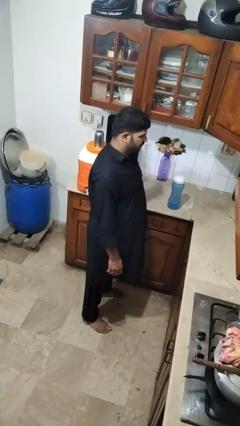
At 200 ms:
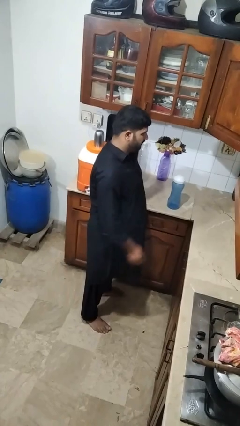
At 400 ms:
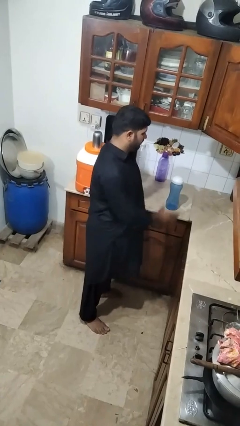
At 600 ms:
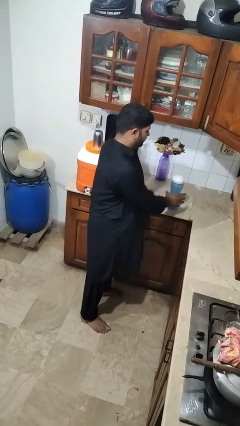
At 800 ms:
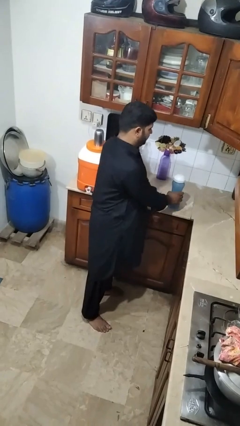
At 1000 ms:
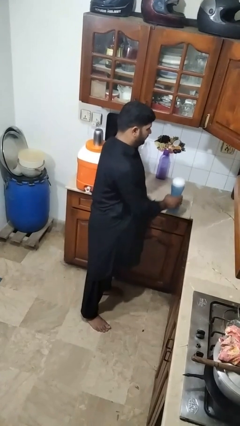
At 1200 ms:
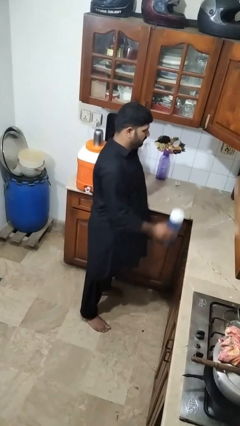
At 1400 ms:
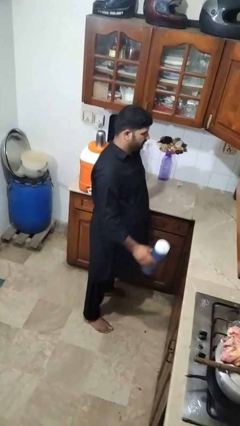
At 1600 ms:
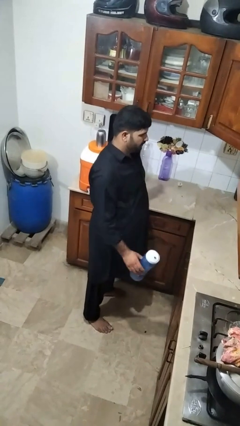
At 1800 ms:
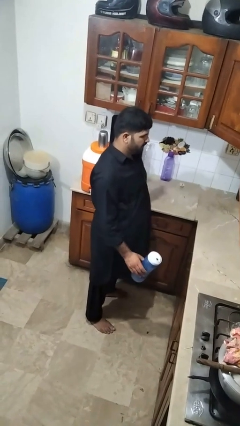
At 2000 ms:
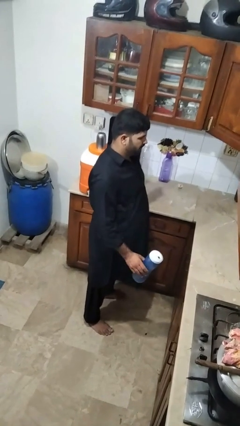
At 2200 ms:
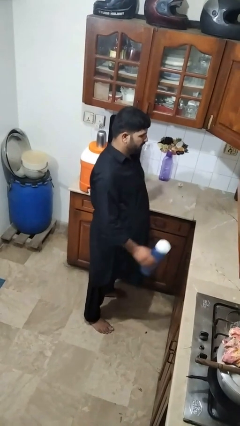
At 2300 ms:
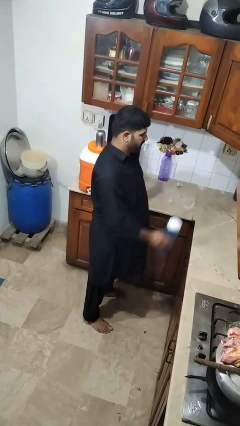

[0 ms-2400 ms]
person picks up object from countertop

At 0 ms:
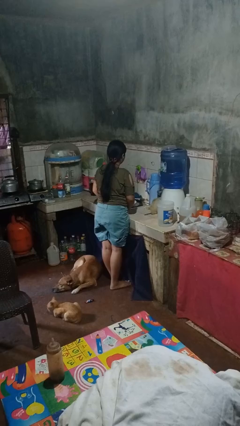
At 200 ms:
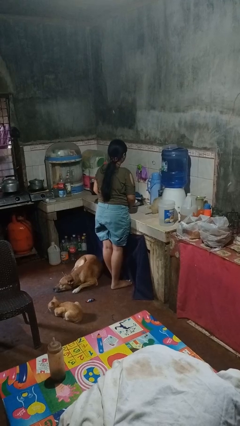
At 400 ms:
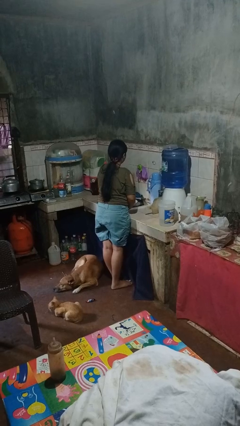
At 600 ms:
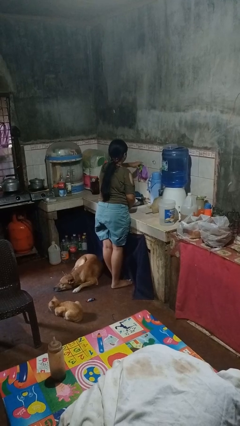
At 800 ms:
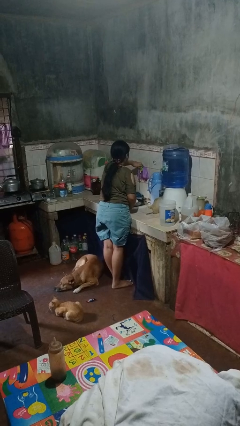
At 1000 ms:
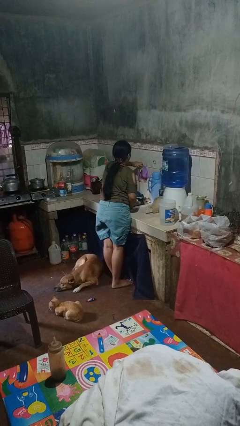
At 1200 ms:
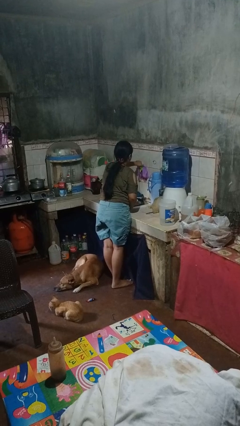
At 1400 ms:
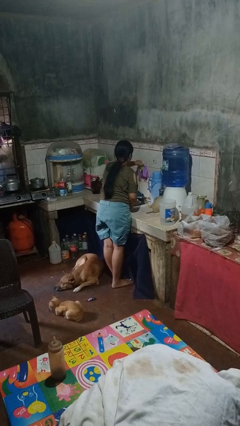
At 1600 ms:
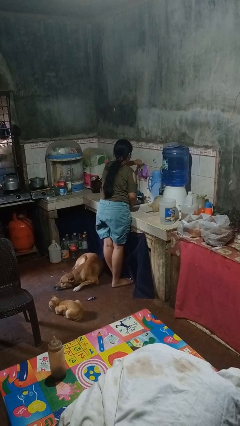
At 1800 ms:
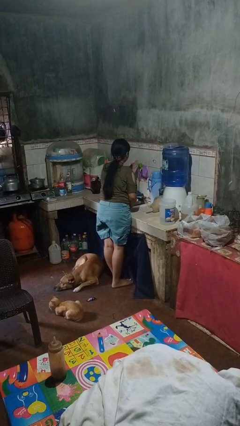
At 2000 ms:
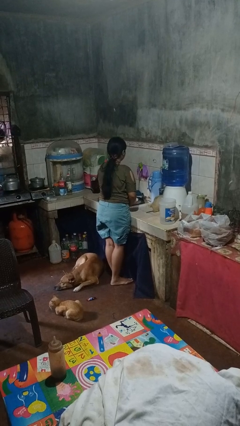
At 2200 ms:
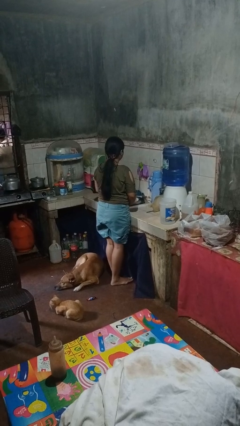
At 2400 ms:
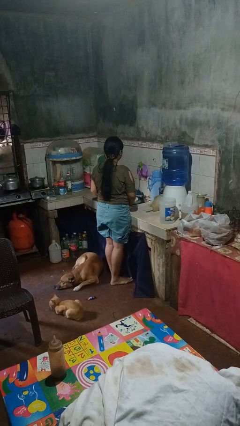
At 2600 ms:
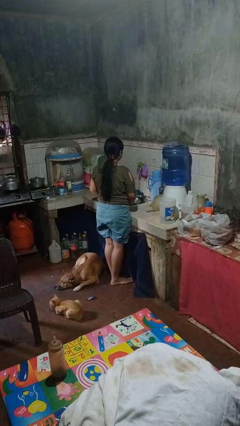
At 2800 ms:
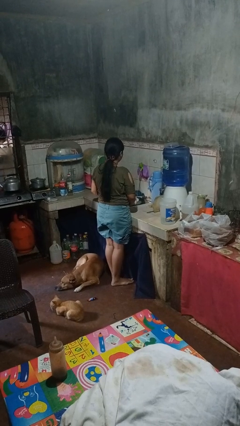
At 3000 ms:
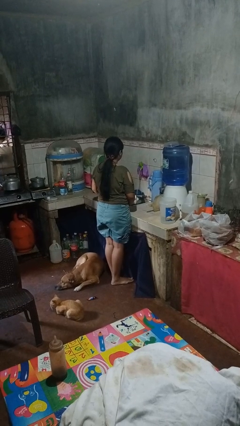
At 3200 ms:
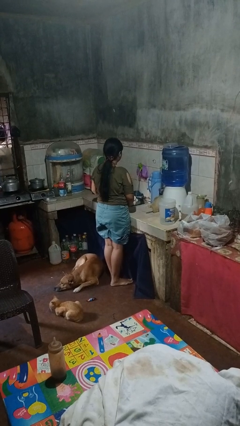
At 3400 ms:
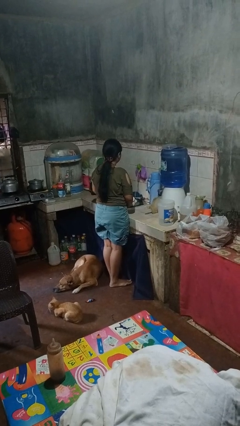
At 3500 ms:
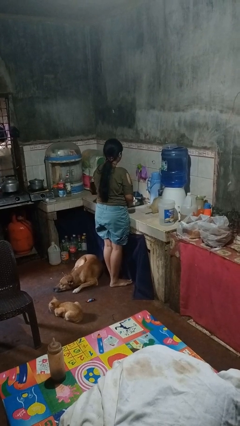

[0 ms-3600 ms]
person turns on faucet

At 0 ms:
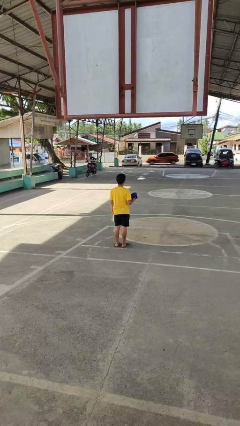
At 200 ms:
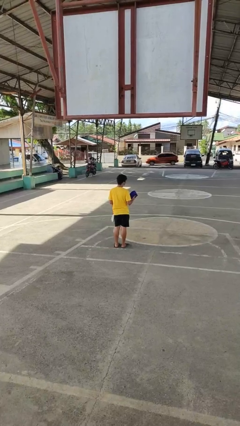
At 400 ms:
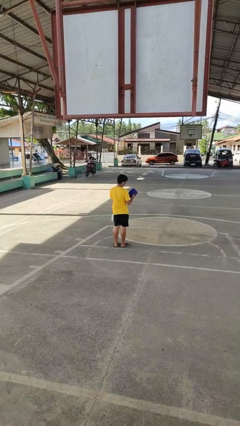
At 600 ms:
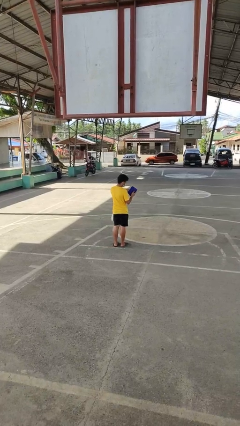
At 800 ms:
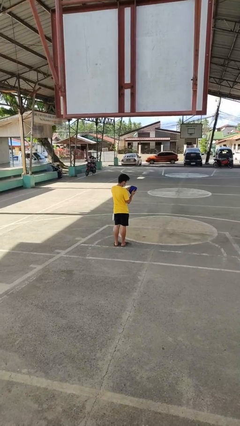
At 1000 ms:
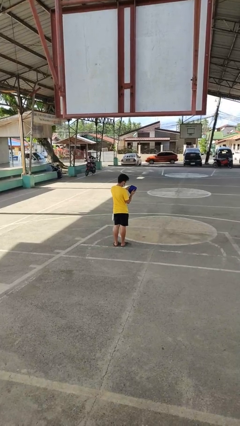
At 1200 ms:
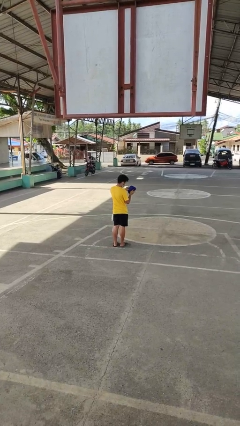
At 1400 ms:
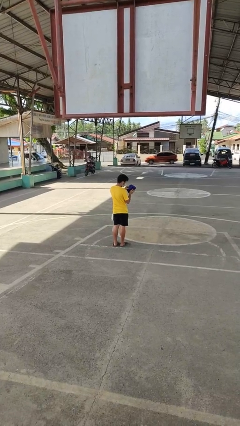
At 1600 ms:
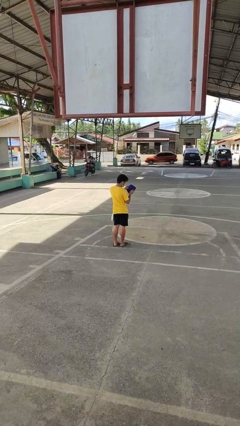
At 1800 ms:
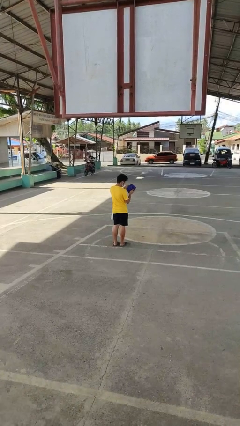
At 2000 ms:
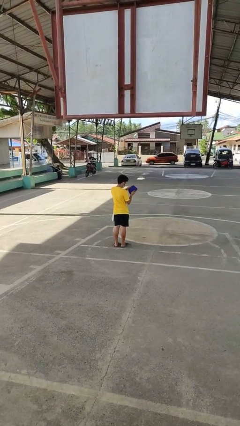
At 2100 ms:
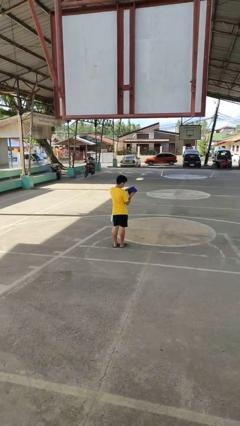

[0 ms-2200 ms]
person searches in purse

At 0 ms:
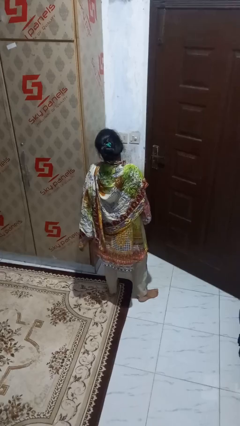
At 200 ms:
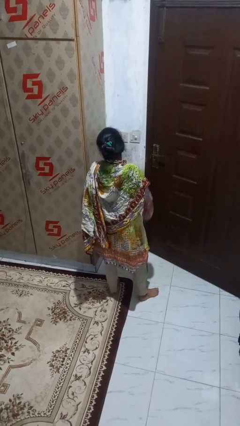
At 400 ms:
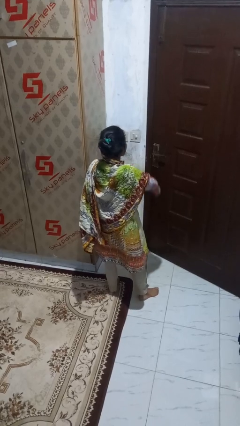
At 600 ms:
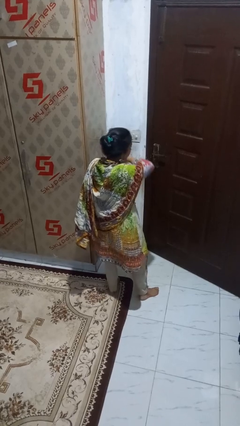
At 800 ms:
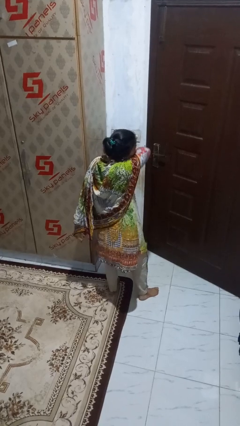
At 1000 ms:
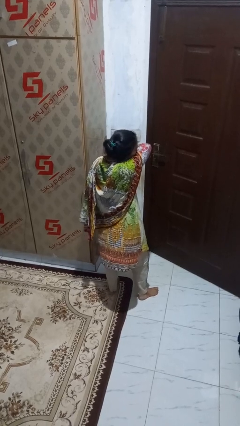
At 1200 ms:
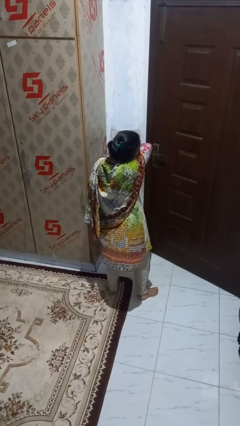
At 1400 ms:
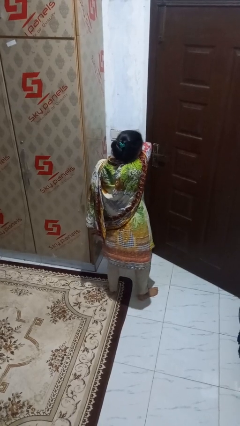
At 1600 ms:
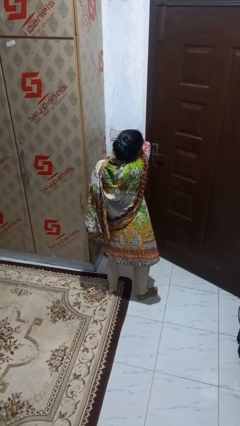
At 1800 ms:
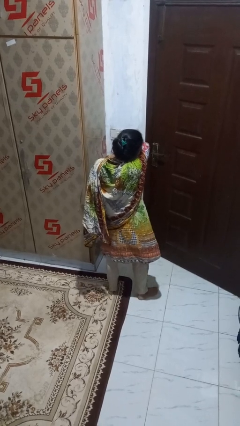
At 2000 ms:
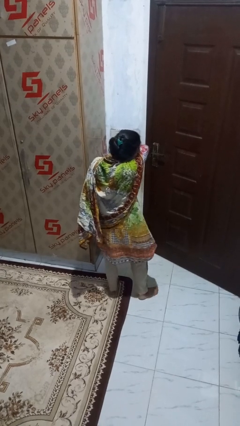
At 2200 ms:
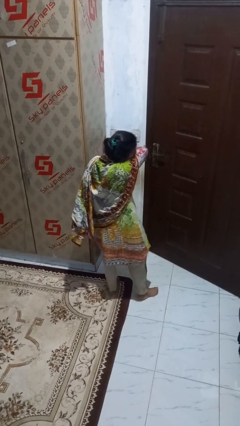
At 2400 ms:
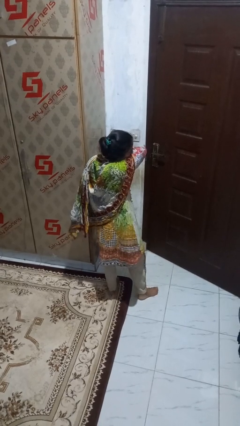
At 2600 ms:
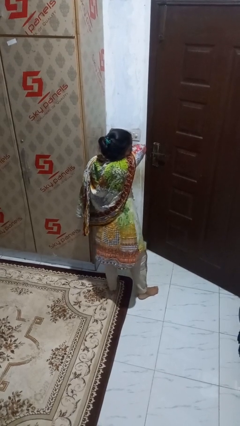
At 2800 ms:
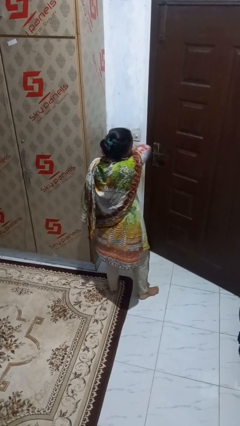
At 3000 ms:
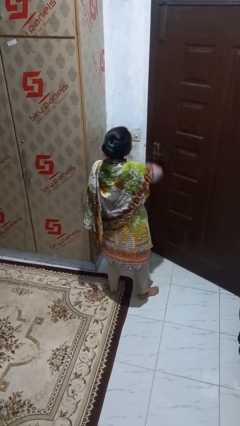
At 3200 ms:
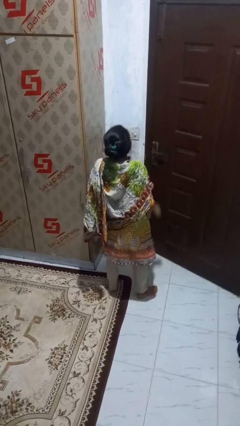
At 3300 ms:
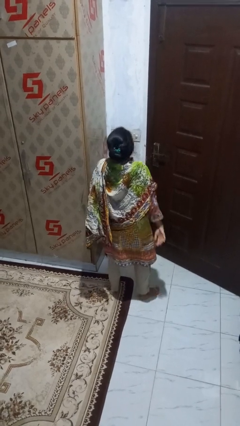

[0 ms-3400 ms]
person sneezes into arm

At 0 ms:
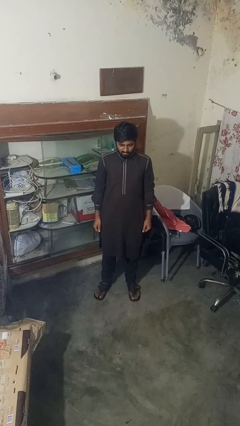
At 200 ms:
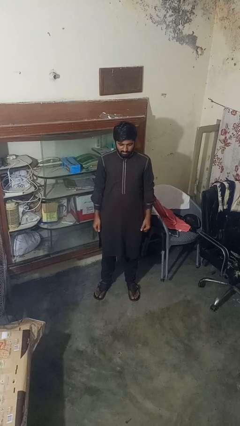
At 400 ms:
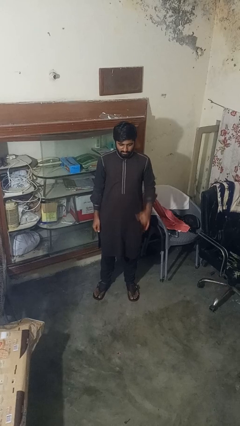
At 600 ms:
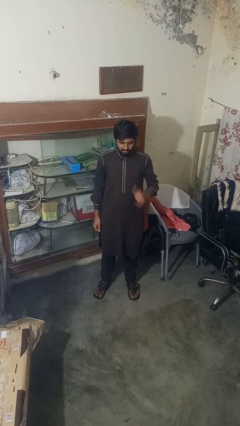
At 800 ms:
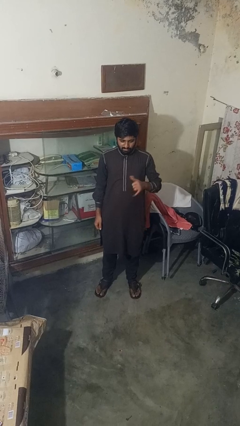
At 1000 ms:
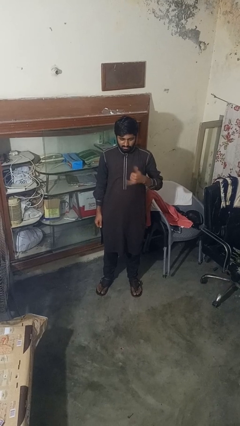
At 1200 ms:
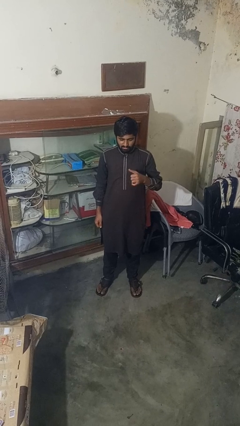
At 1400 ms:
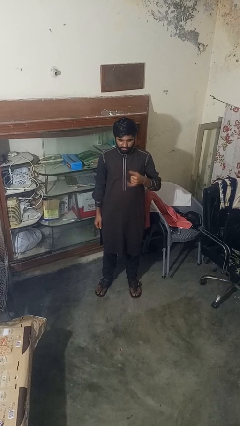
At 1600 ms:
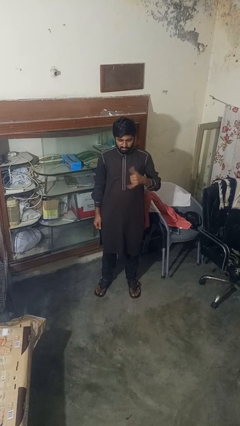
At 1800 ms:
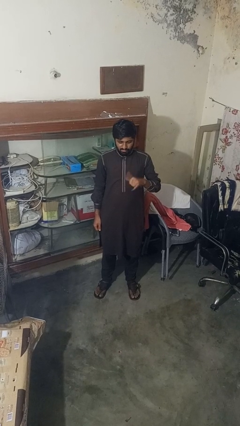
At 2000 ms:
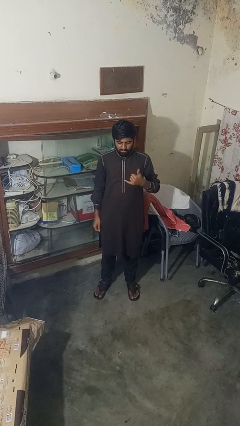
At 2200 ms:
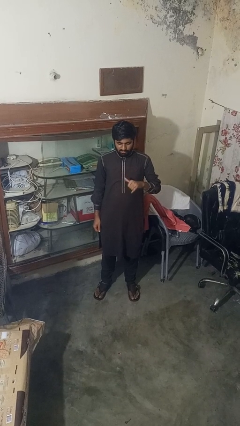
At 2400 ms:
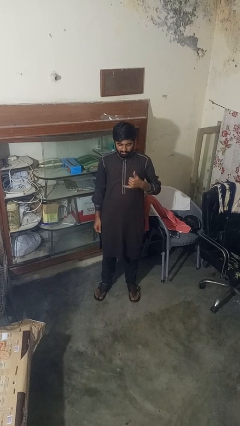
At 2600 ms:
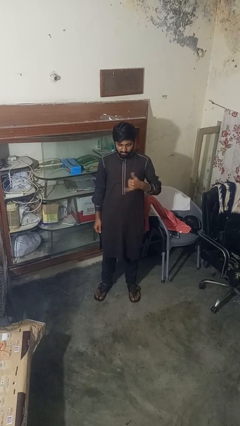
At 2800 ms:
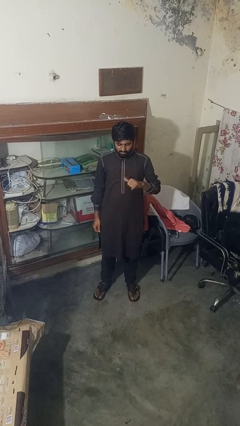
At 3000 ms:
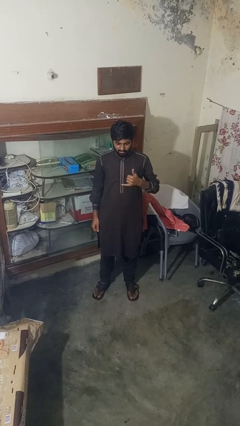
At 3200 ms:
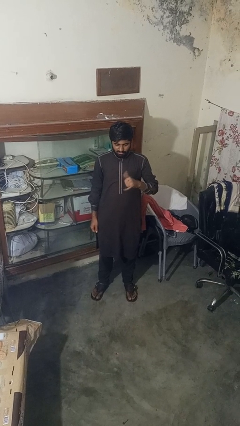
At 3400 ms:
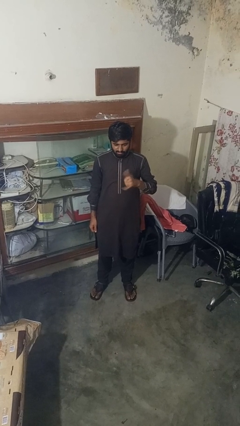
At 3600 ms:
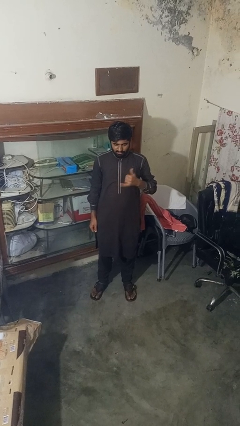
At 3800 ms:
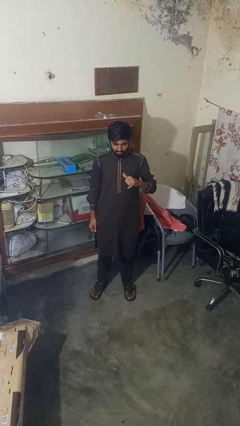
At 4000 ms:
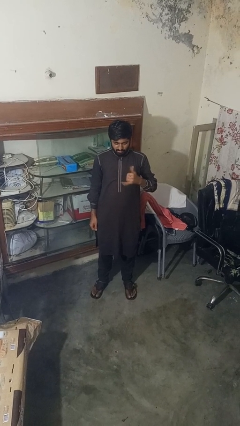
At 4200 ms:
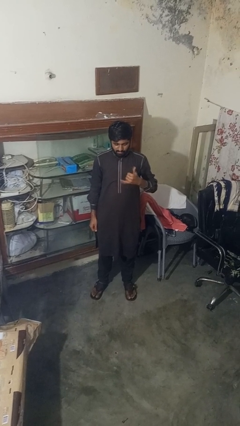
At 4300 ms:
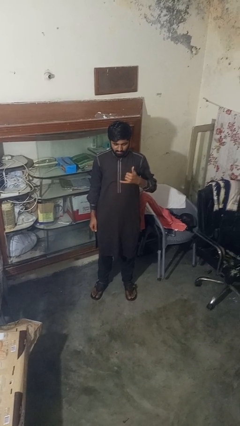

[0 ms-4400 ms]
person gestures hang loose

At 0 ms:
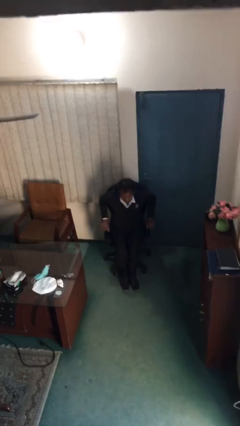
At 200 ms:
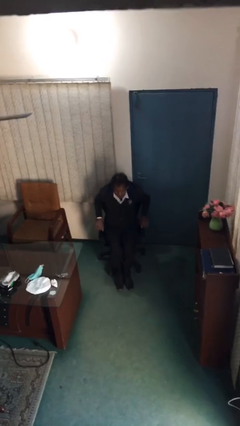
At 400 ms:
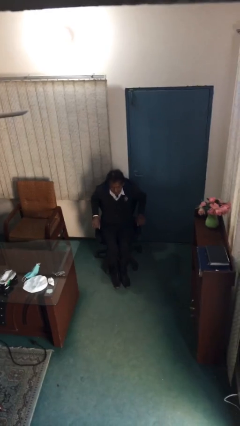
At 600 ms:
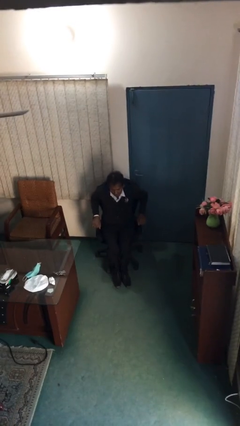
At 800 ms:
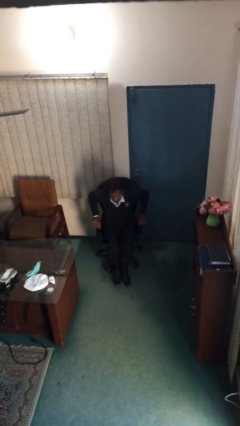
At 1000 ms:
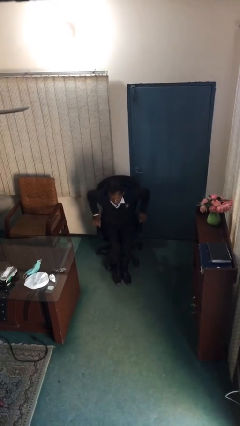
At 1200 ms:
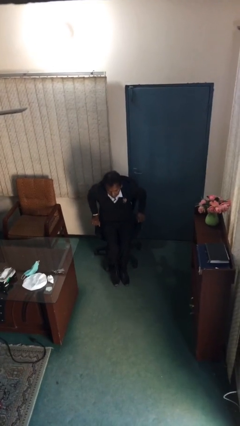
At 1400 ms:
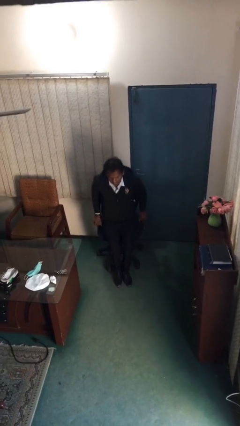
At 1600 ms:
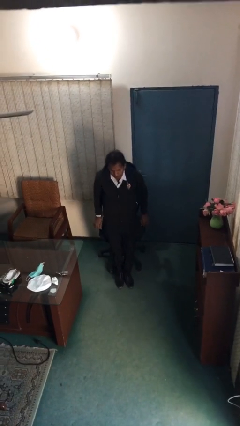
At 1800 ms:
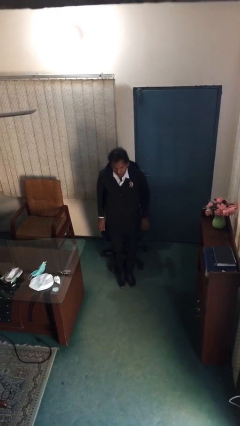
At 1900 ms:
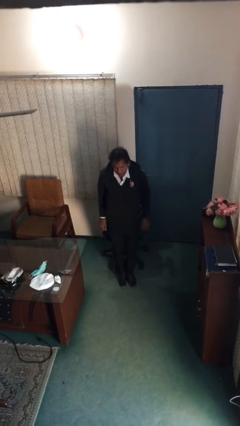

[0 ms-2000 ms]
person stands up
